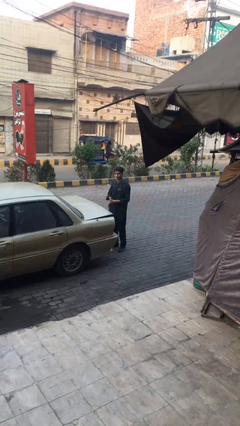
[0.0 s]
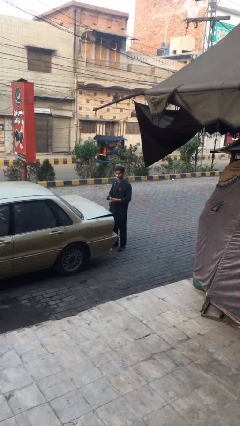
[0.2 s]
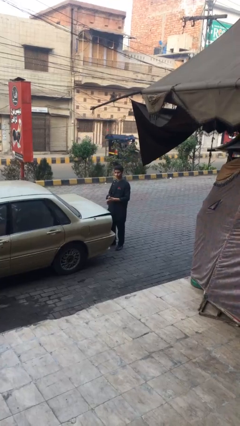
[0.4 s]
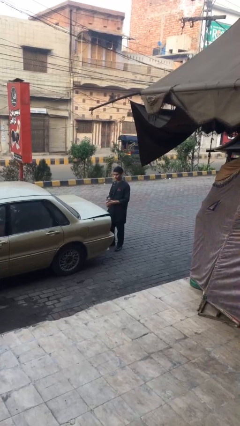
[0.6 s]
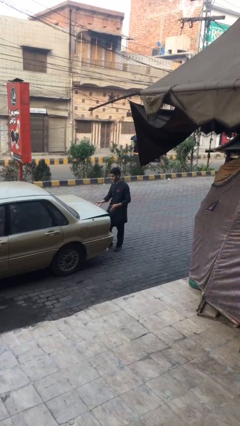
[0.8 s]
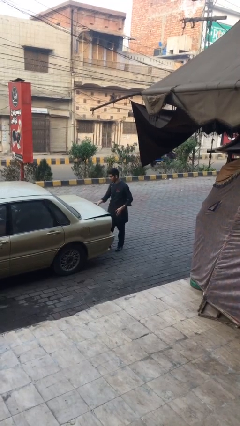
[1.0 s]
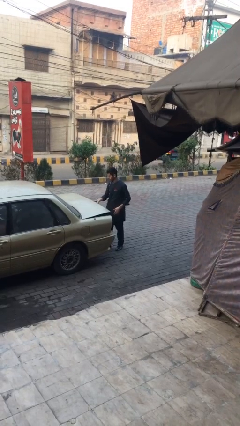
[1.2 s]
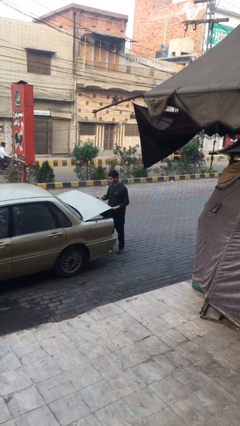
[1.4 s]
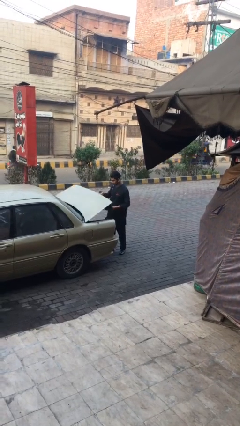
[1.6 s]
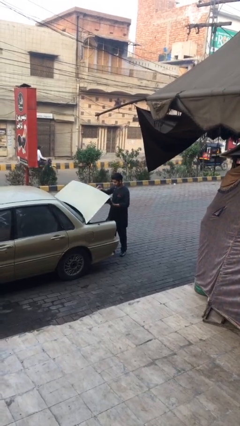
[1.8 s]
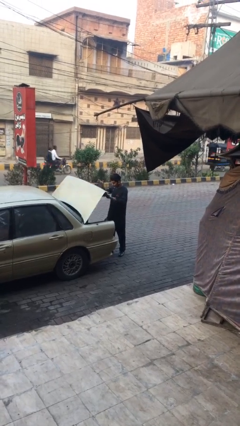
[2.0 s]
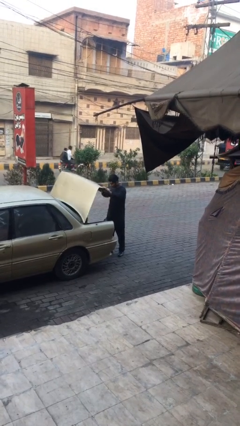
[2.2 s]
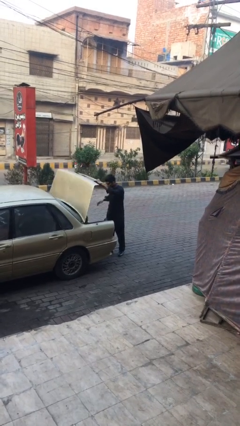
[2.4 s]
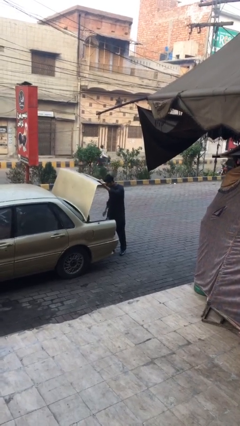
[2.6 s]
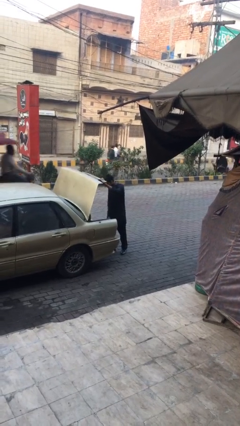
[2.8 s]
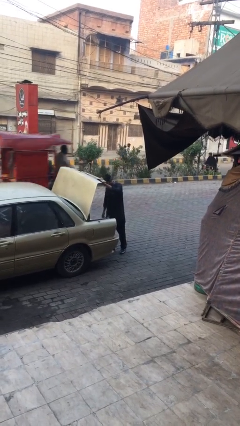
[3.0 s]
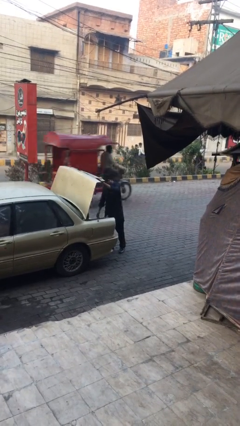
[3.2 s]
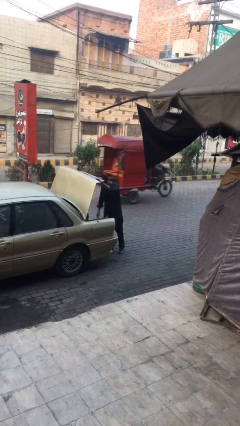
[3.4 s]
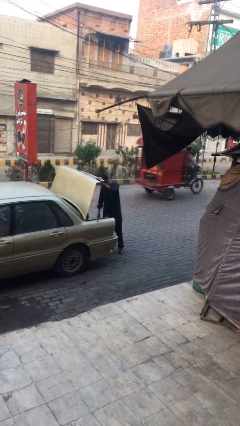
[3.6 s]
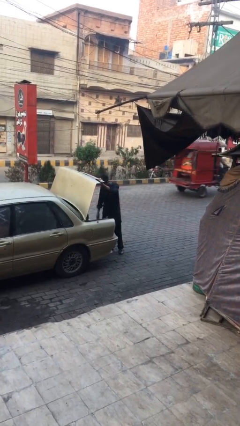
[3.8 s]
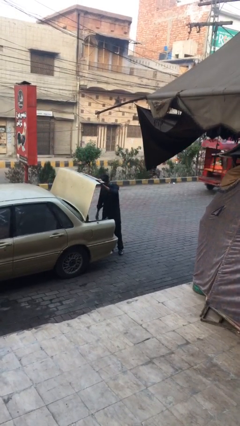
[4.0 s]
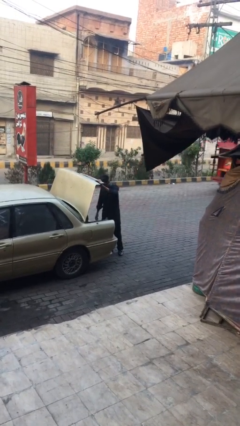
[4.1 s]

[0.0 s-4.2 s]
person opens car trunk

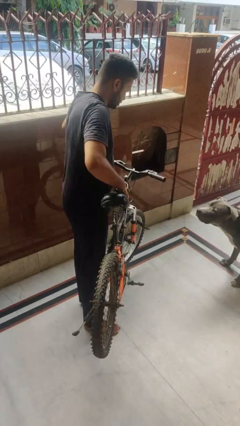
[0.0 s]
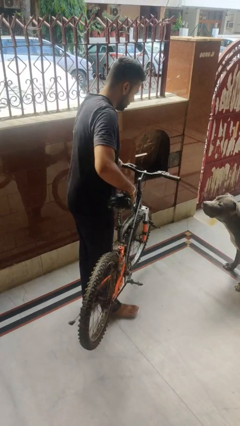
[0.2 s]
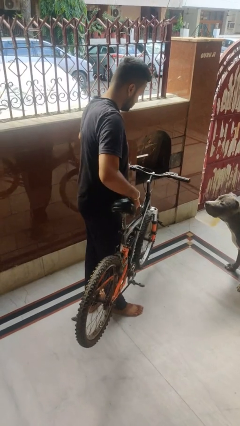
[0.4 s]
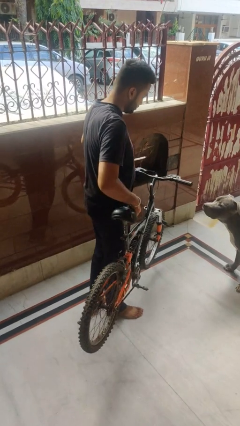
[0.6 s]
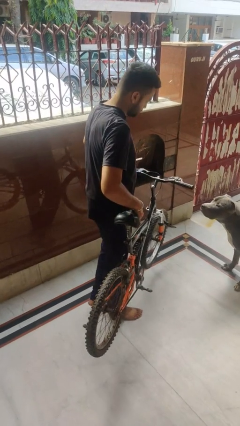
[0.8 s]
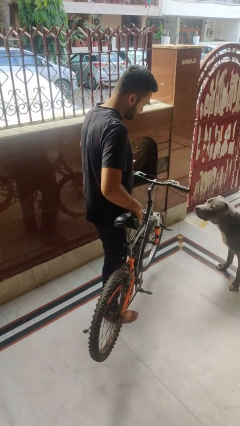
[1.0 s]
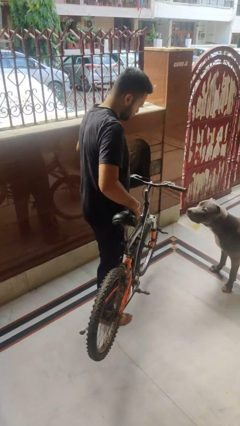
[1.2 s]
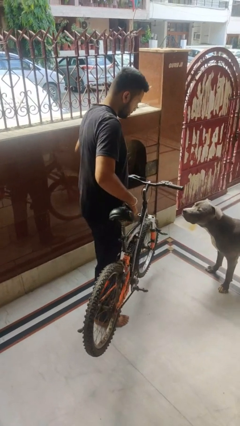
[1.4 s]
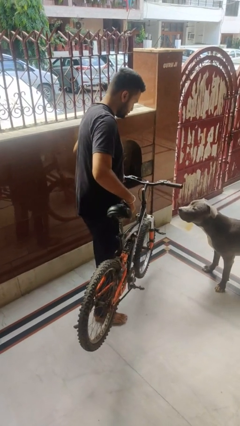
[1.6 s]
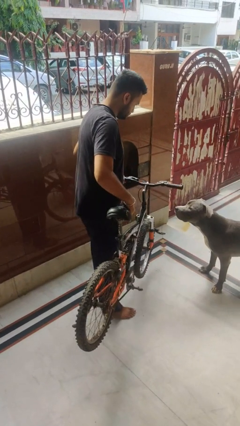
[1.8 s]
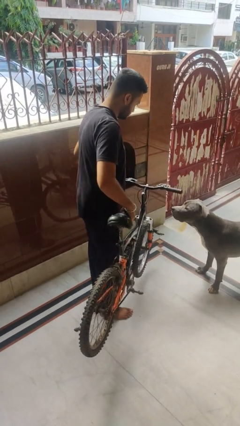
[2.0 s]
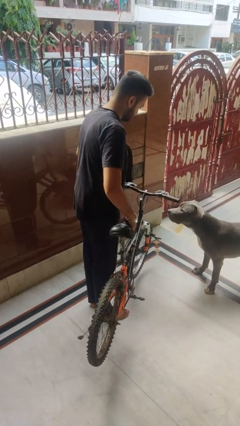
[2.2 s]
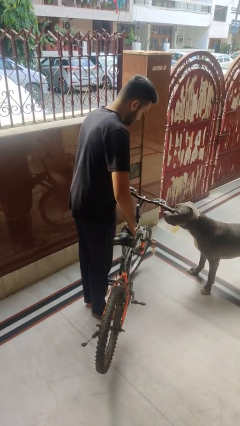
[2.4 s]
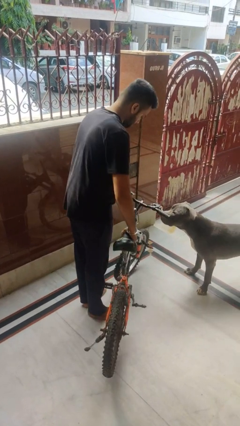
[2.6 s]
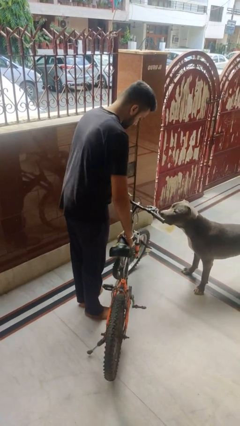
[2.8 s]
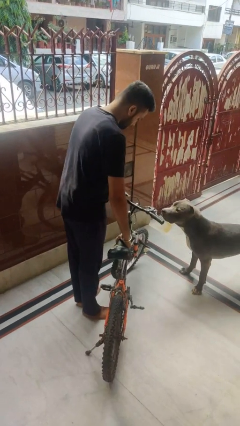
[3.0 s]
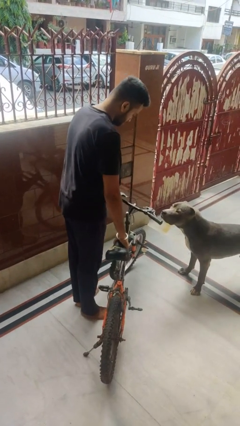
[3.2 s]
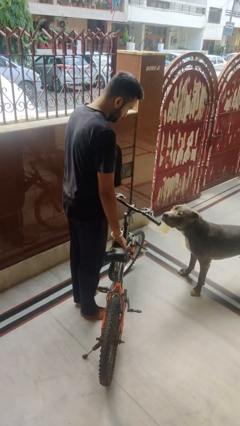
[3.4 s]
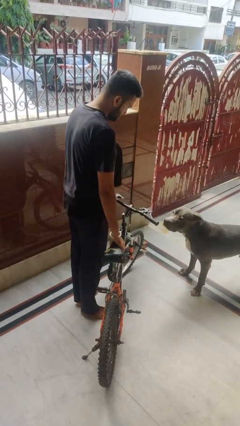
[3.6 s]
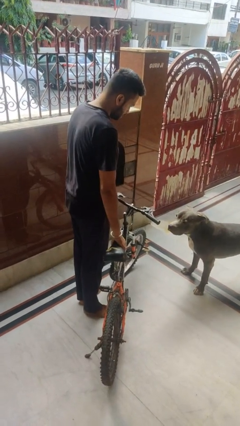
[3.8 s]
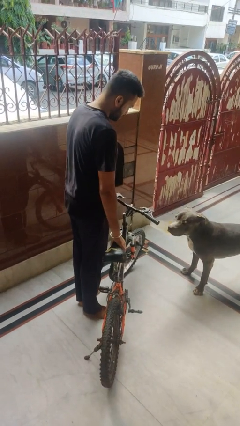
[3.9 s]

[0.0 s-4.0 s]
person carries bicycle

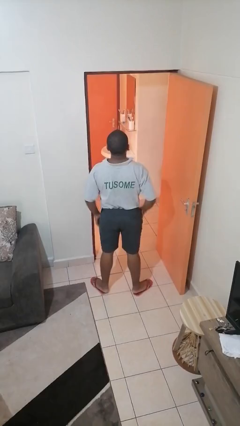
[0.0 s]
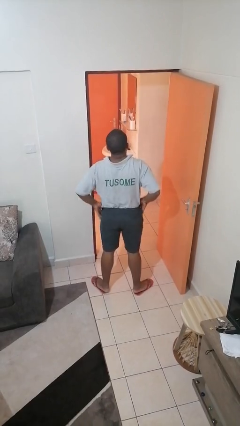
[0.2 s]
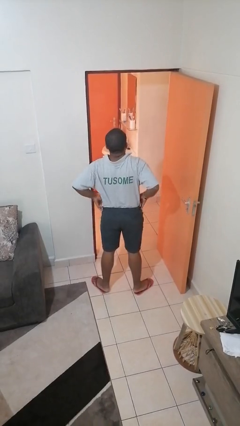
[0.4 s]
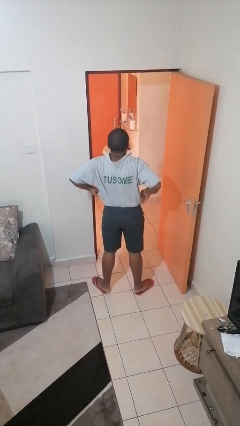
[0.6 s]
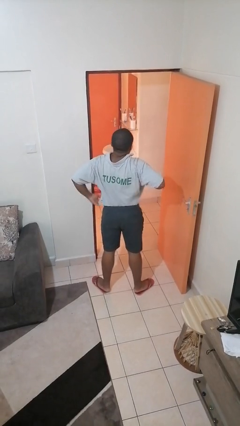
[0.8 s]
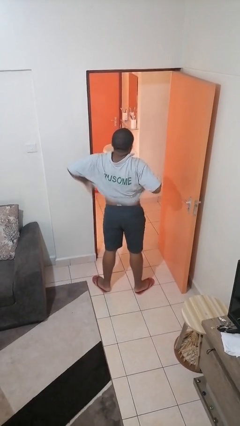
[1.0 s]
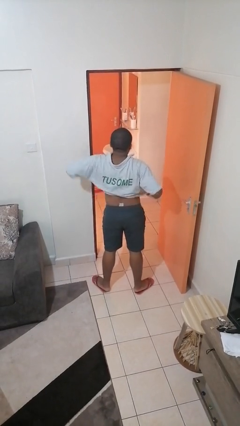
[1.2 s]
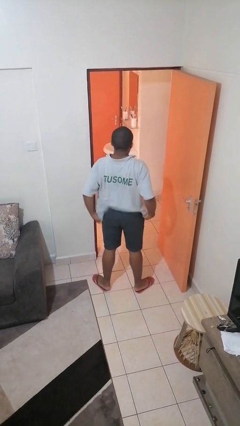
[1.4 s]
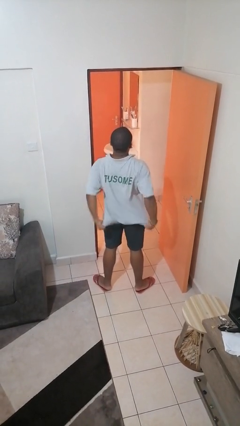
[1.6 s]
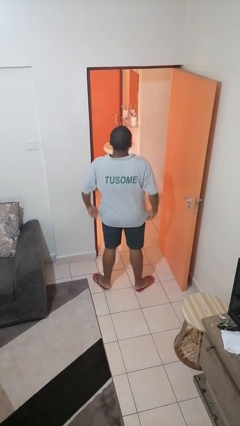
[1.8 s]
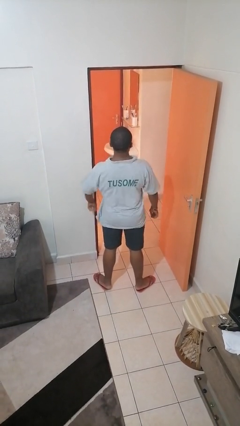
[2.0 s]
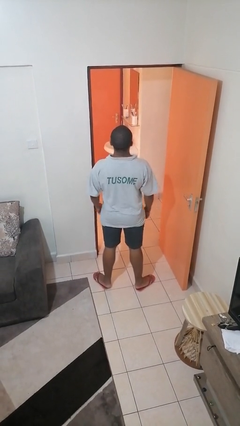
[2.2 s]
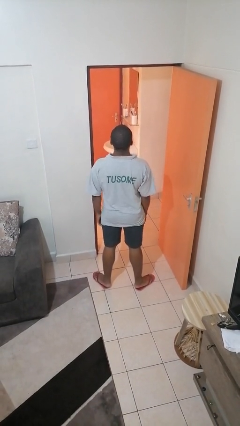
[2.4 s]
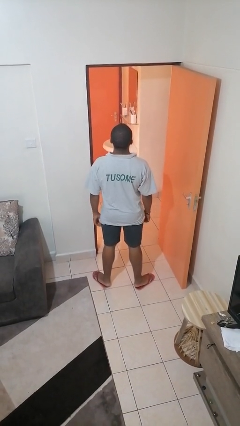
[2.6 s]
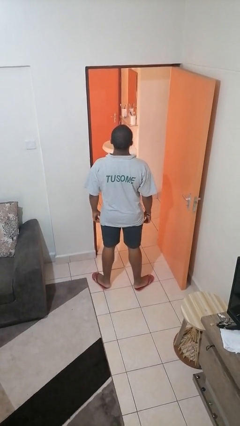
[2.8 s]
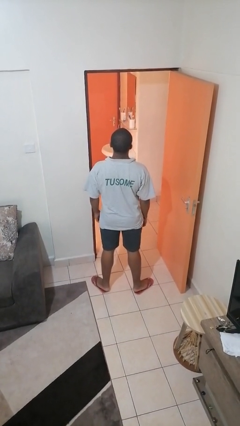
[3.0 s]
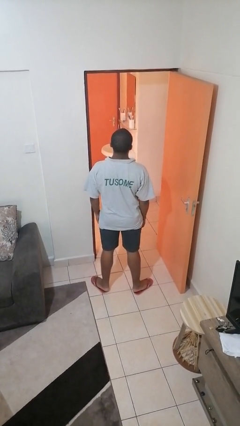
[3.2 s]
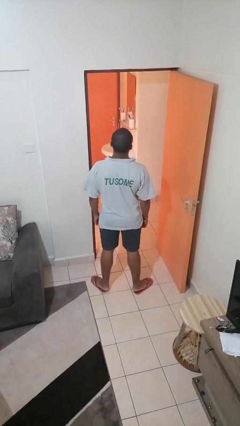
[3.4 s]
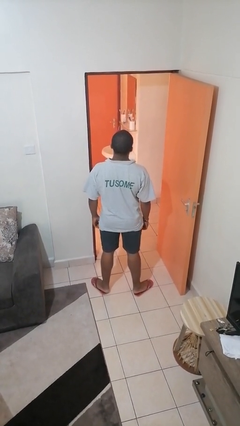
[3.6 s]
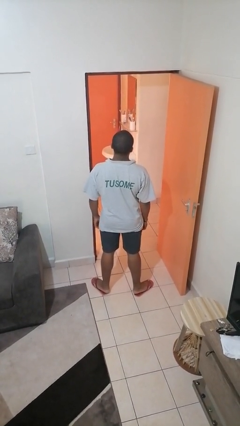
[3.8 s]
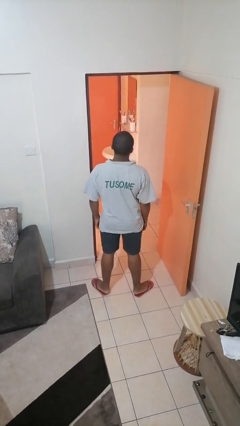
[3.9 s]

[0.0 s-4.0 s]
person untucks shirt

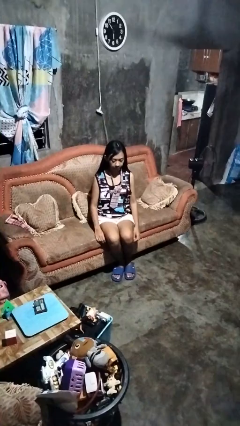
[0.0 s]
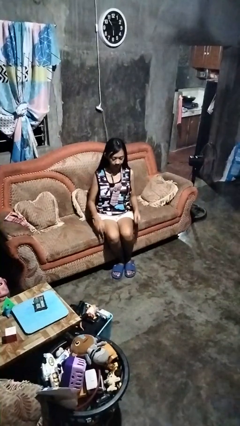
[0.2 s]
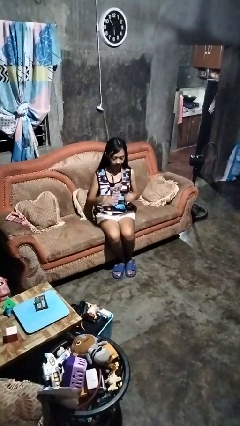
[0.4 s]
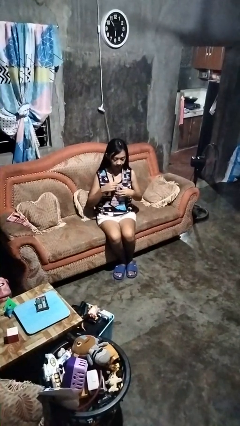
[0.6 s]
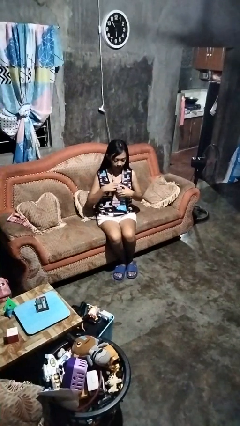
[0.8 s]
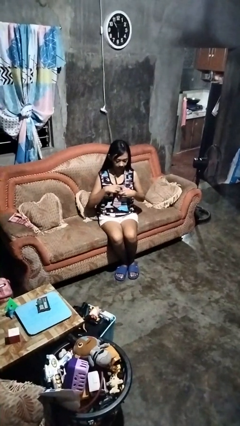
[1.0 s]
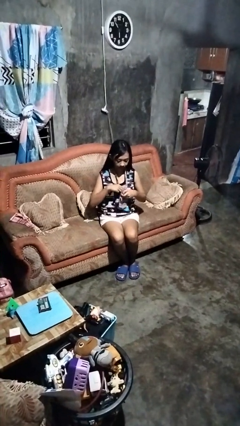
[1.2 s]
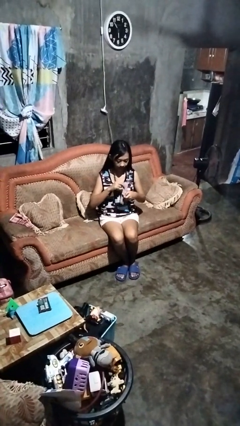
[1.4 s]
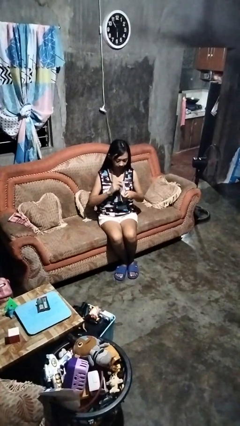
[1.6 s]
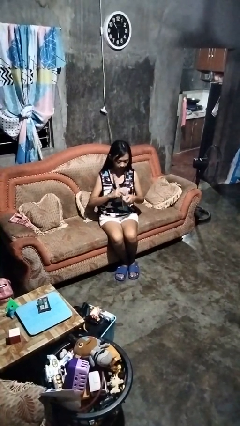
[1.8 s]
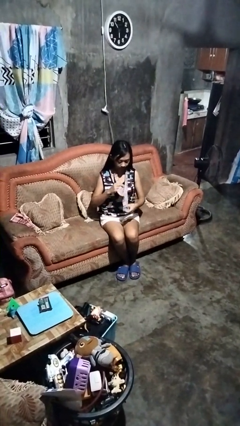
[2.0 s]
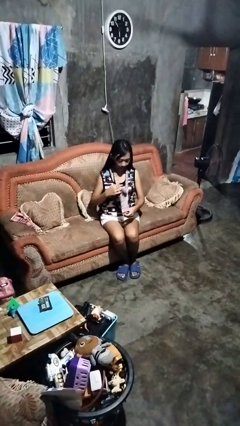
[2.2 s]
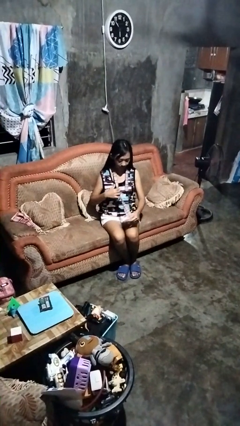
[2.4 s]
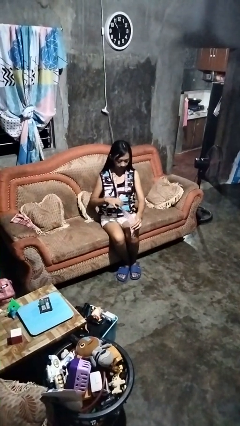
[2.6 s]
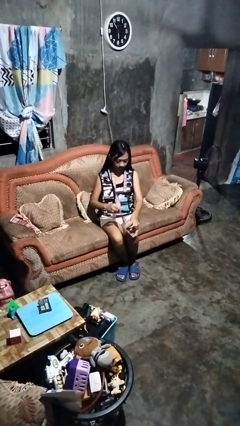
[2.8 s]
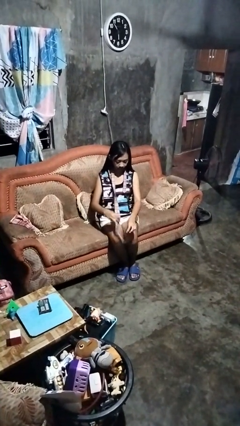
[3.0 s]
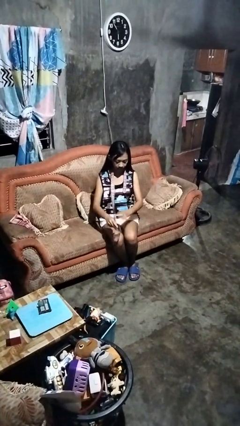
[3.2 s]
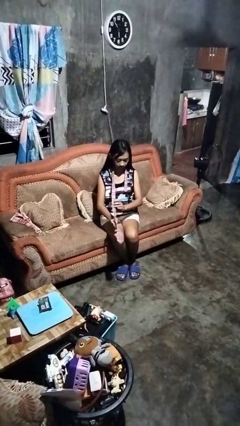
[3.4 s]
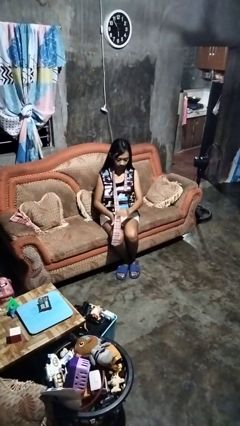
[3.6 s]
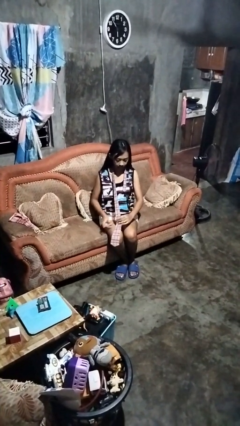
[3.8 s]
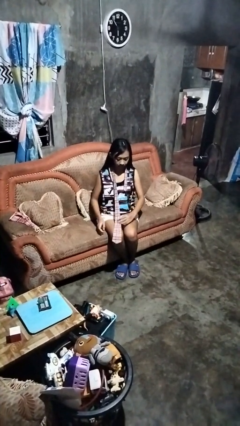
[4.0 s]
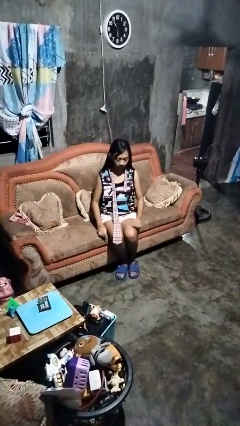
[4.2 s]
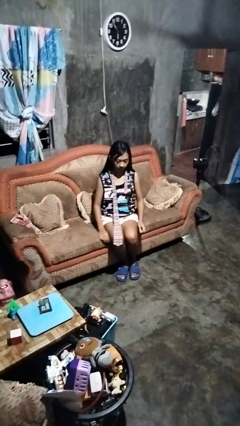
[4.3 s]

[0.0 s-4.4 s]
person takes off necktie

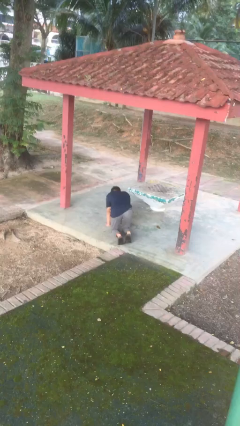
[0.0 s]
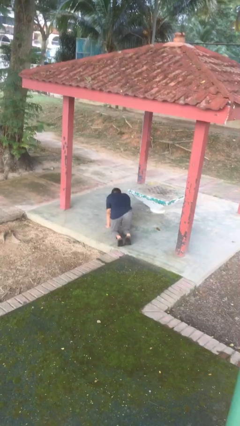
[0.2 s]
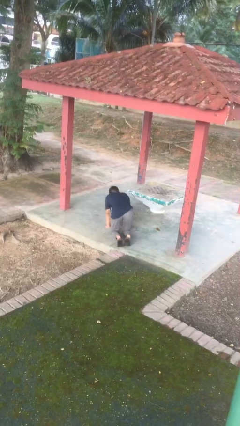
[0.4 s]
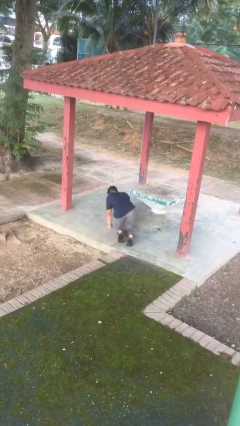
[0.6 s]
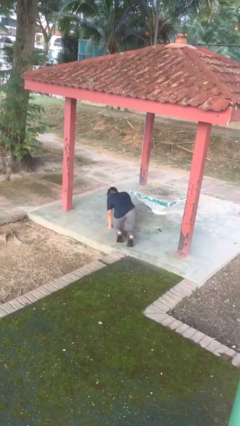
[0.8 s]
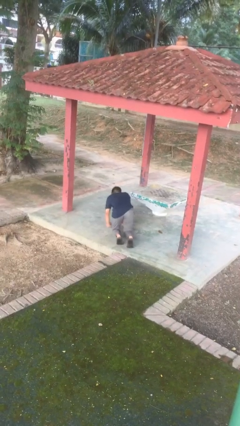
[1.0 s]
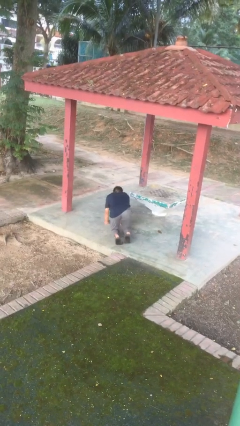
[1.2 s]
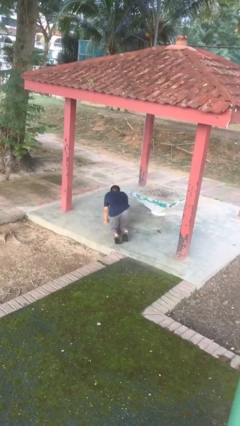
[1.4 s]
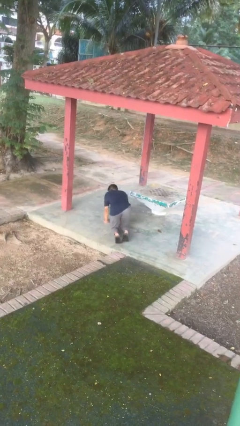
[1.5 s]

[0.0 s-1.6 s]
person crawls
